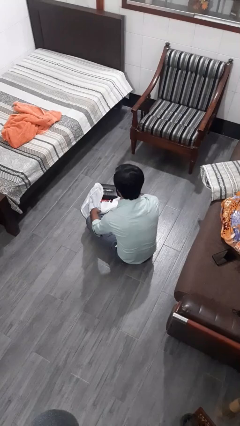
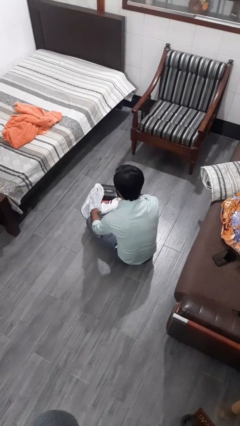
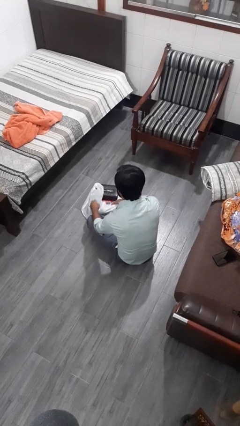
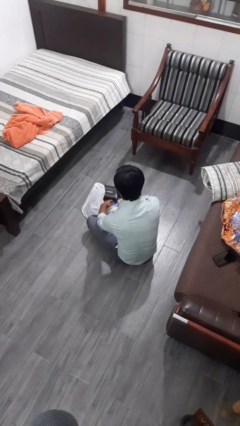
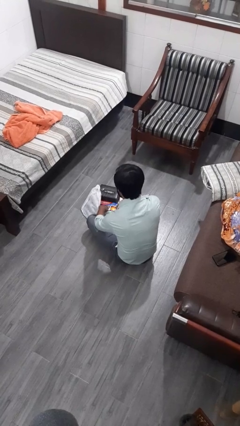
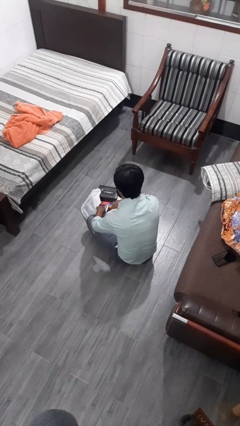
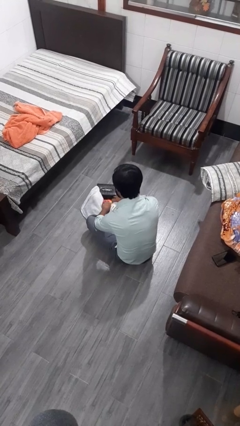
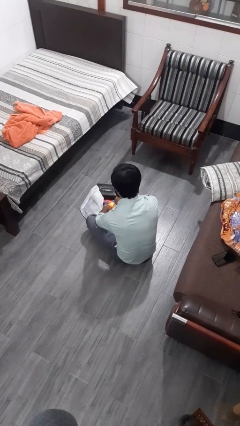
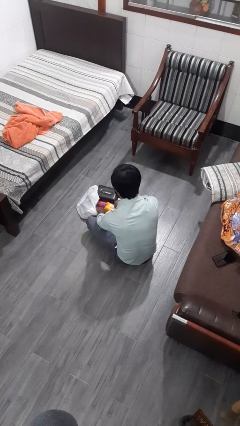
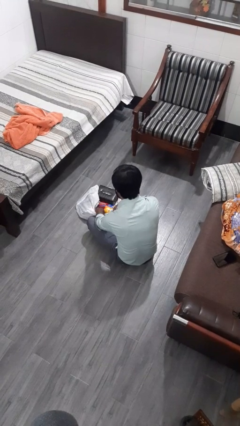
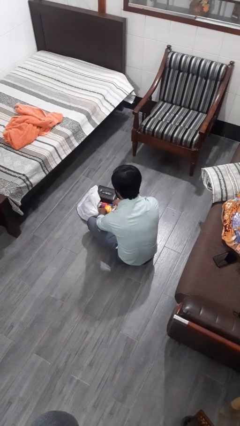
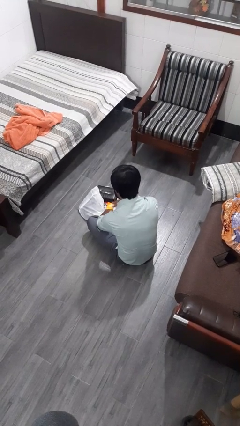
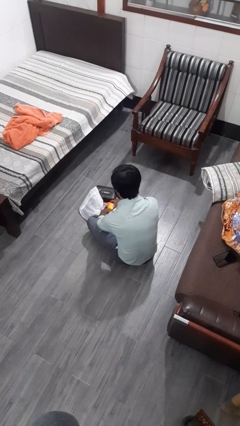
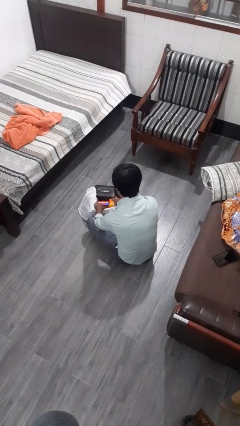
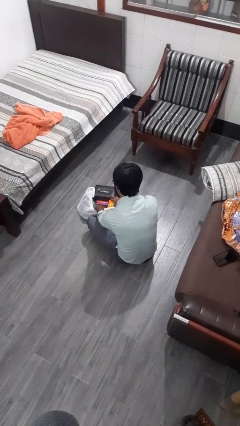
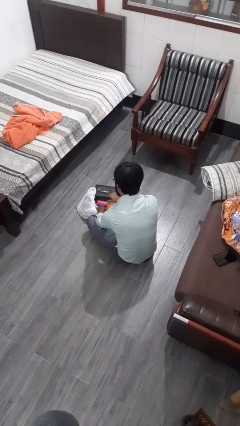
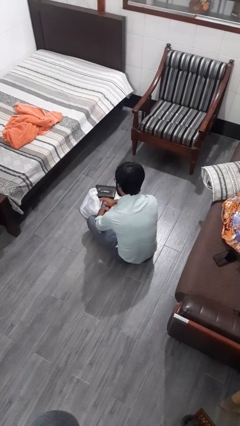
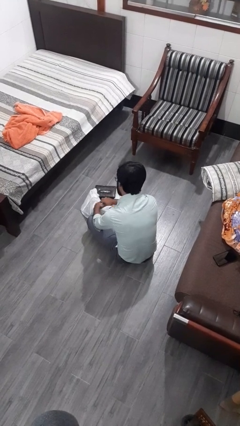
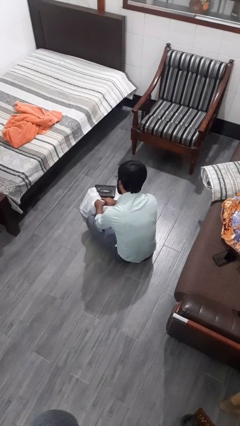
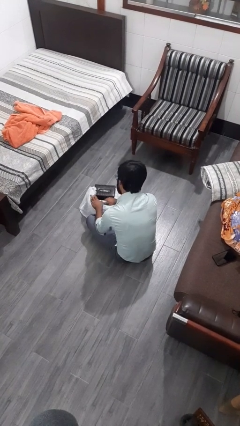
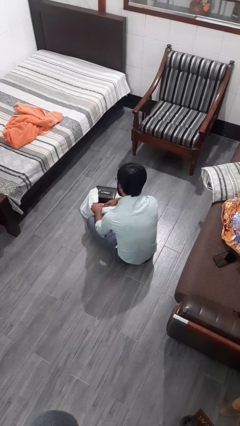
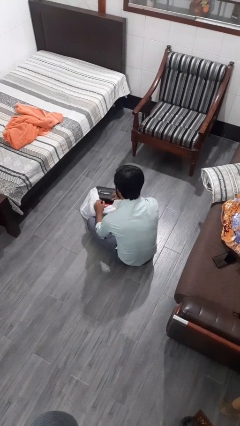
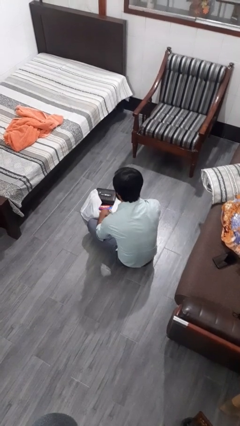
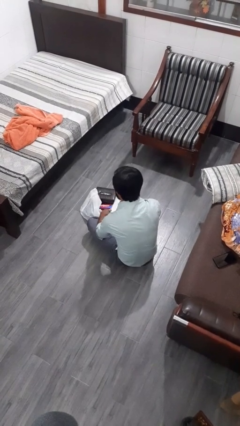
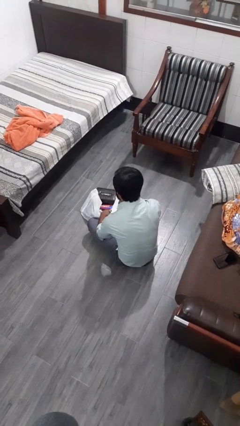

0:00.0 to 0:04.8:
person searches in bag

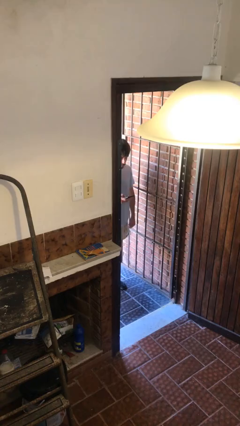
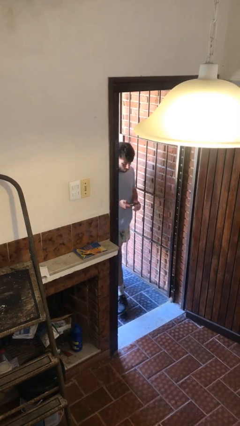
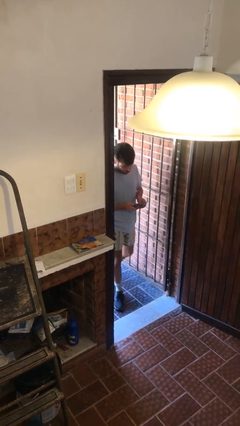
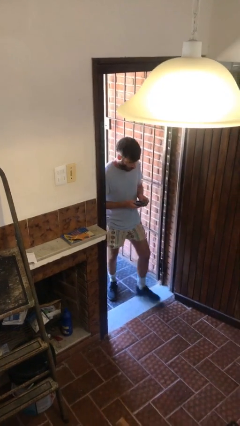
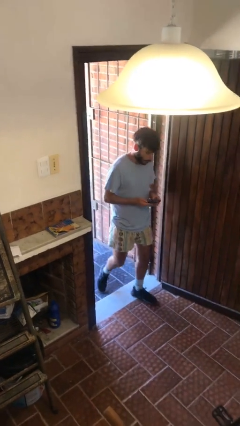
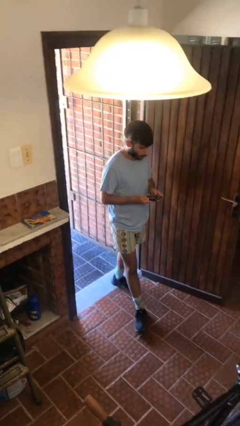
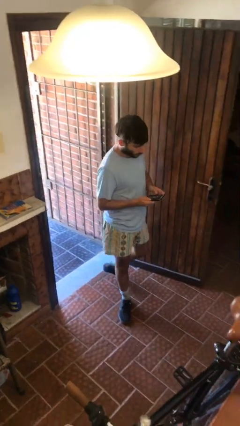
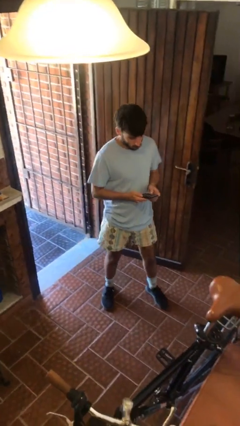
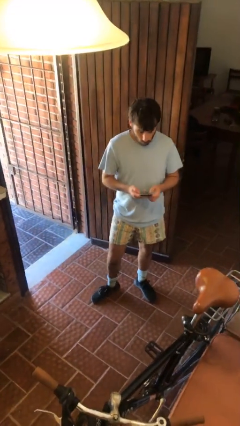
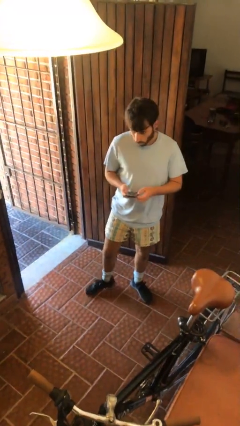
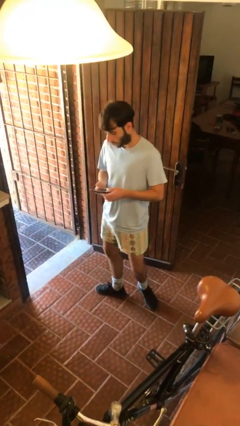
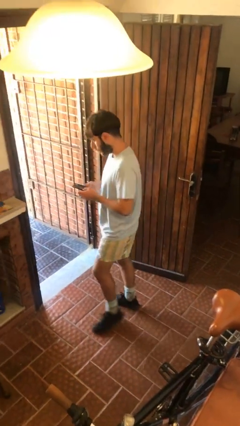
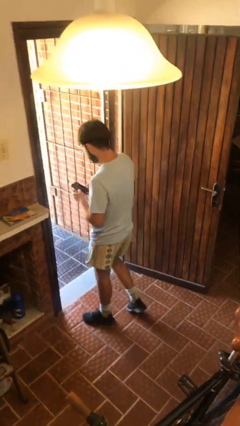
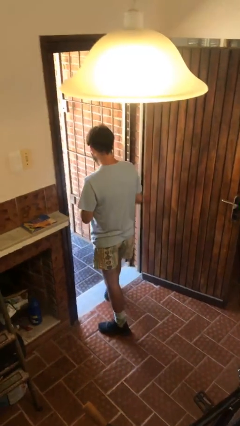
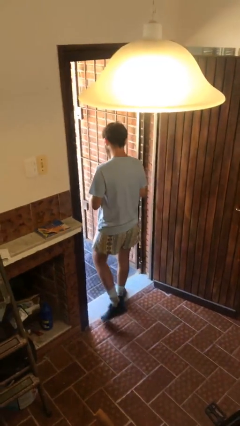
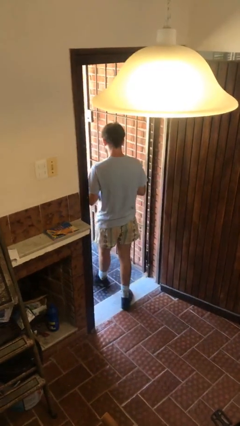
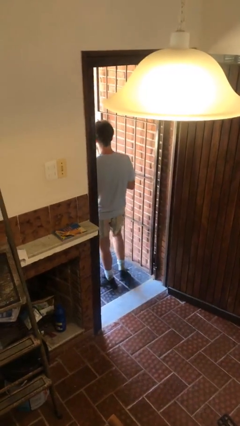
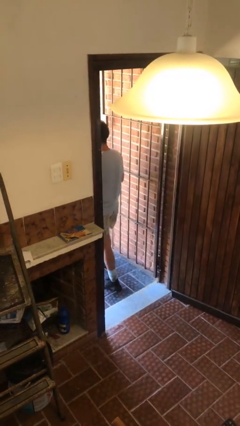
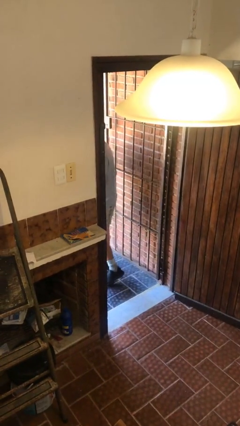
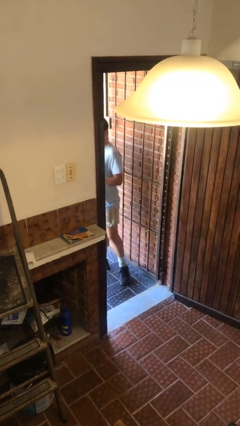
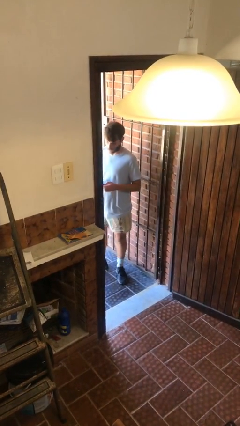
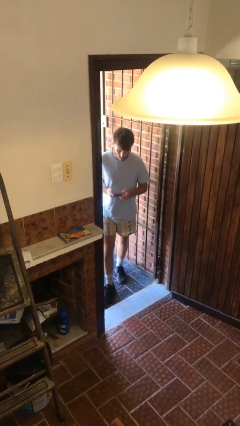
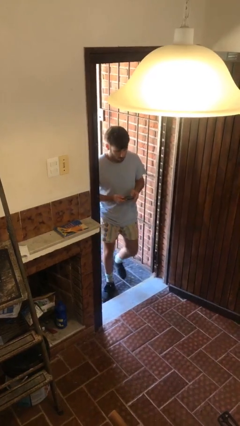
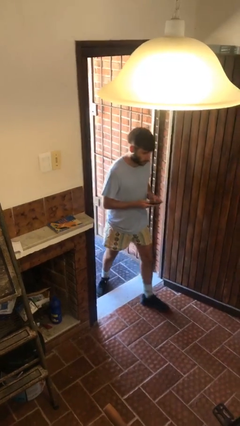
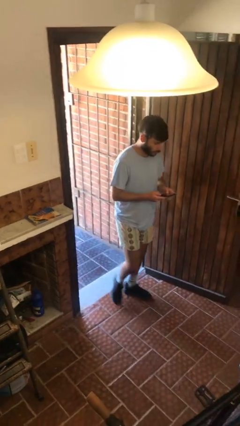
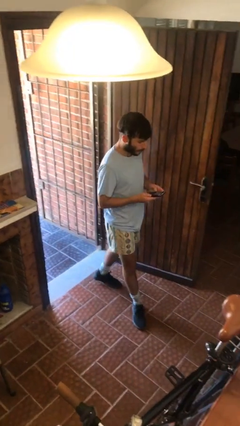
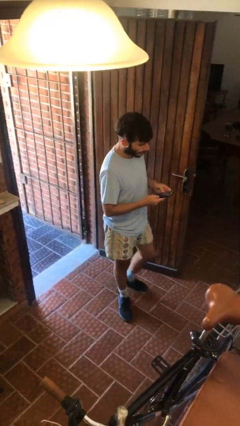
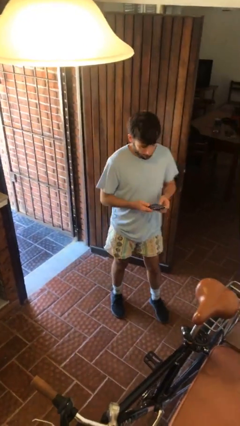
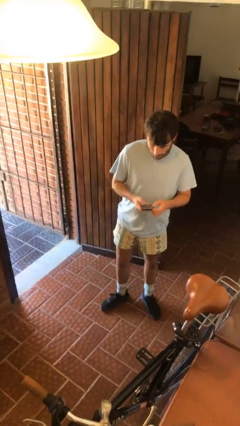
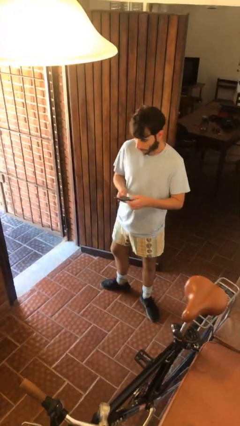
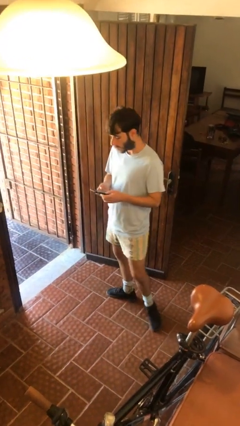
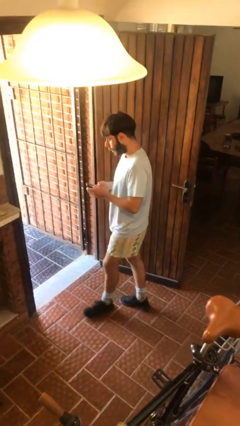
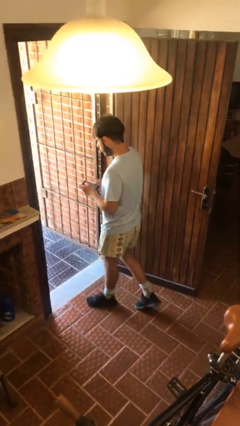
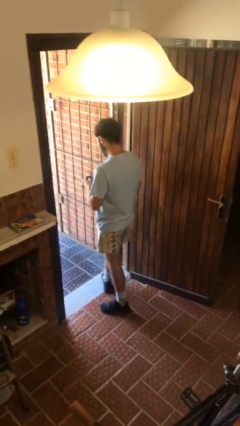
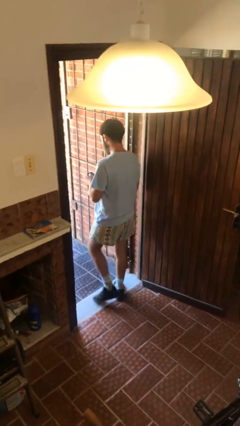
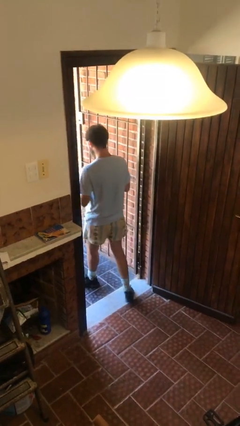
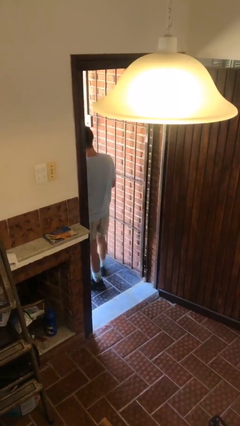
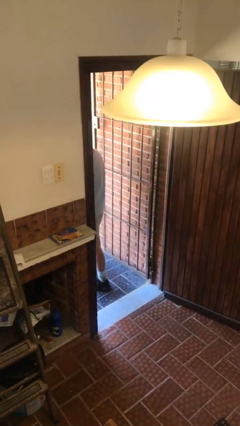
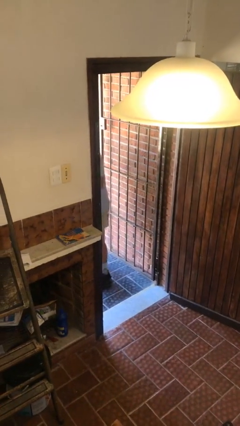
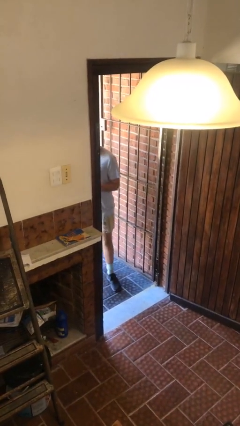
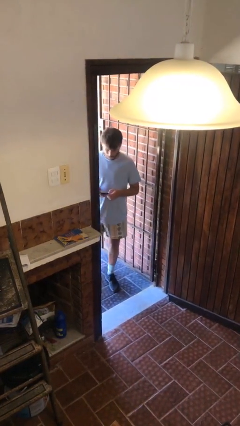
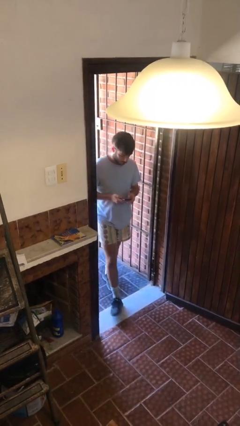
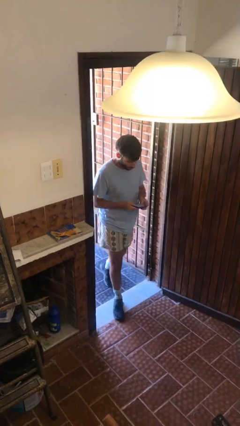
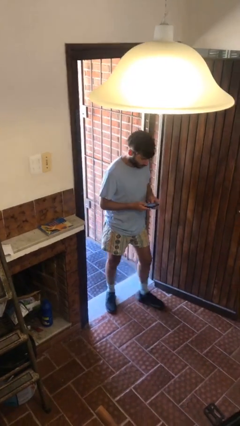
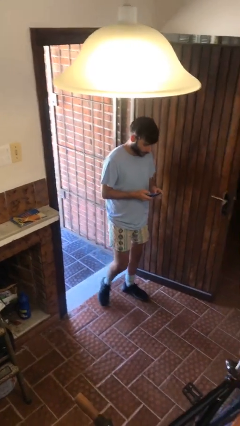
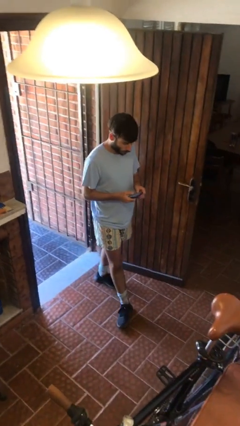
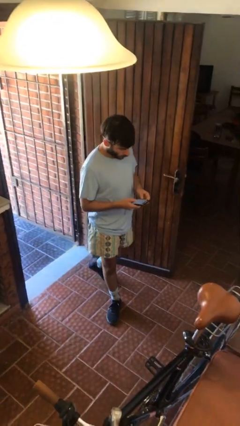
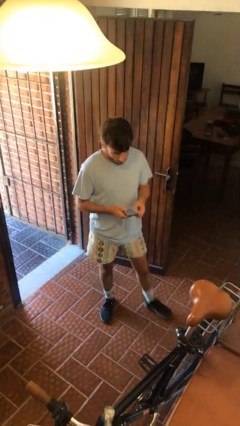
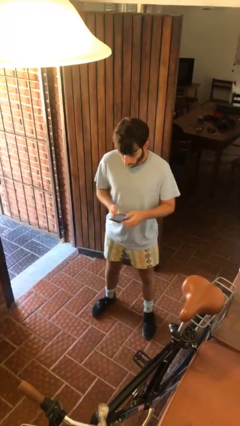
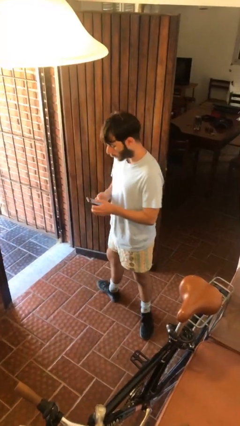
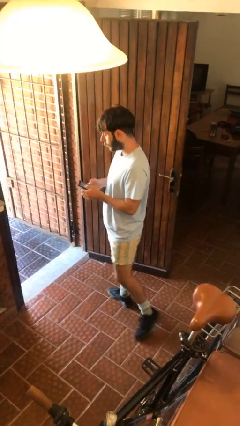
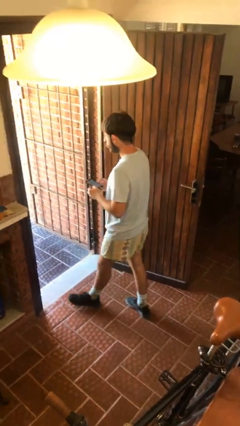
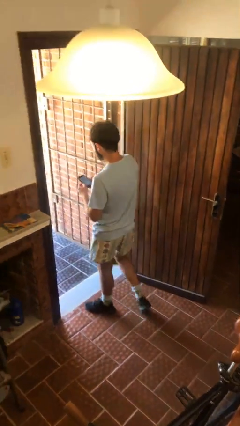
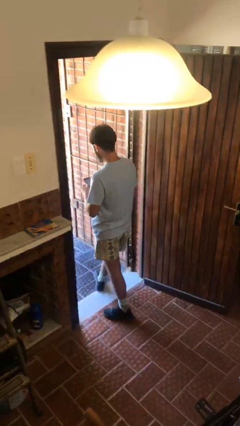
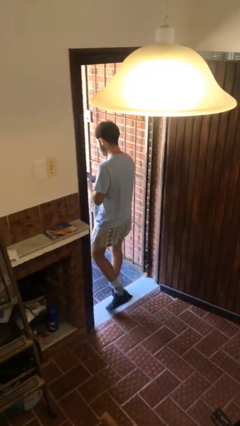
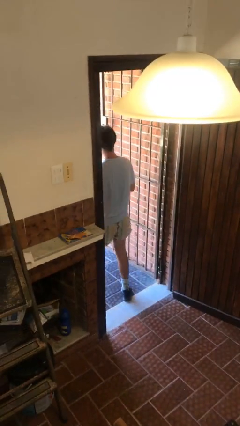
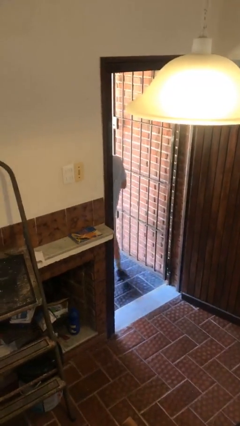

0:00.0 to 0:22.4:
person texts on phone

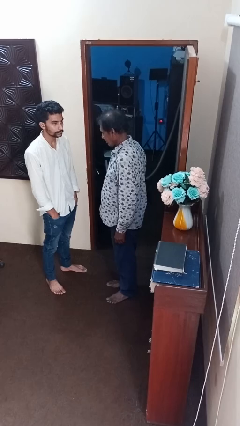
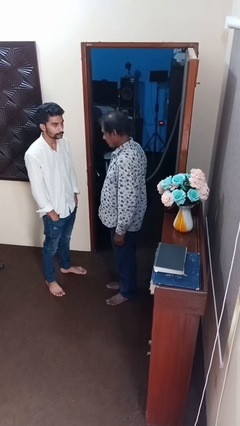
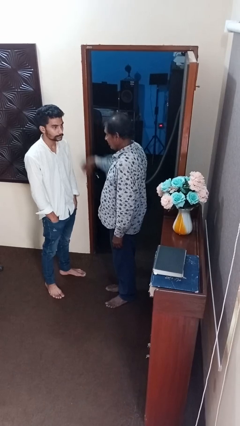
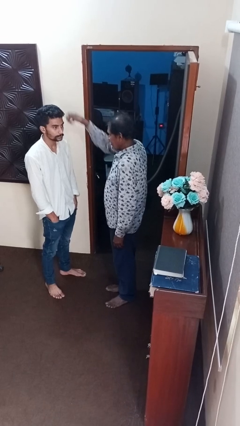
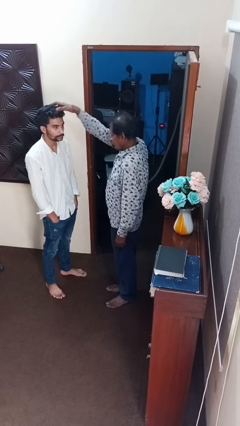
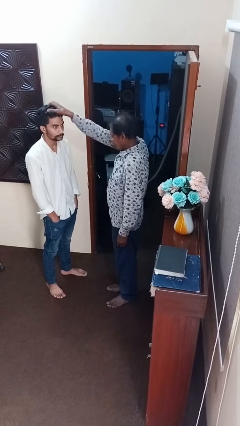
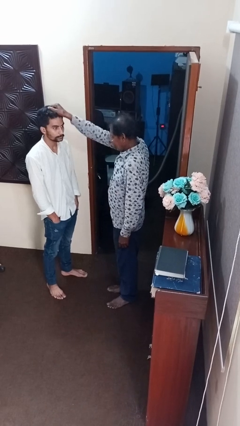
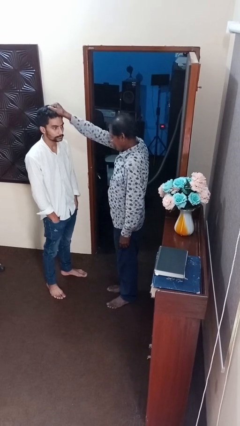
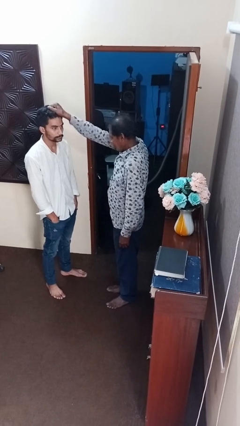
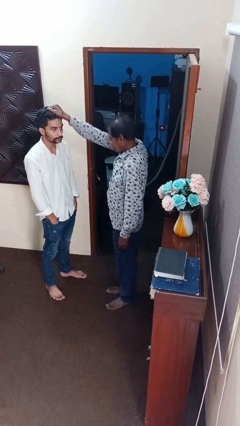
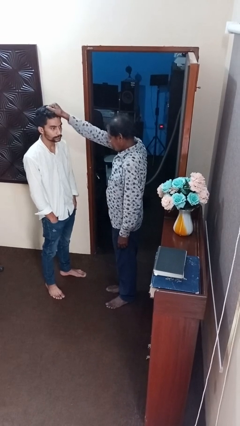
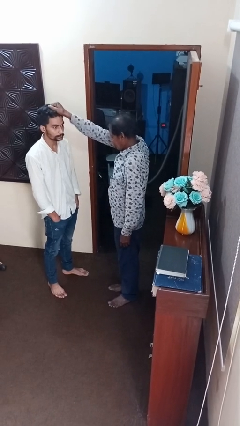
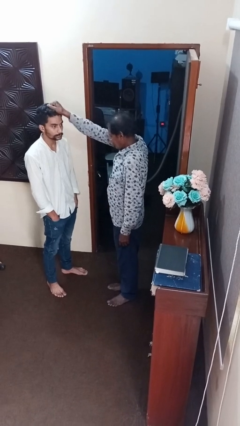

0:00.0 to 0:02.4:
person grabs person by hair
